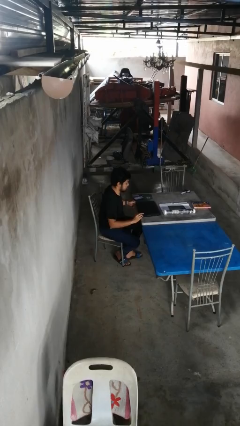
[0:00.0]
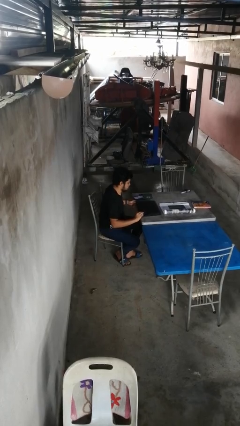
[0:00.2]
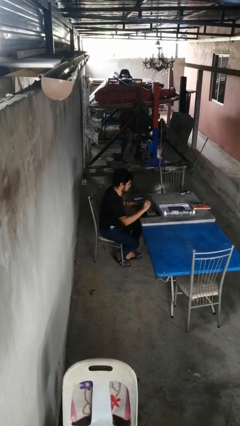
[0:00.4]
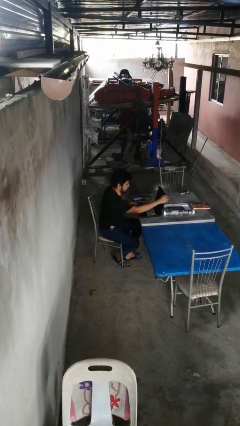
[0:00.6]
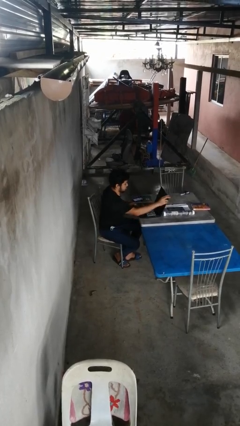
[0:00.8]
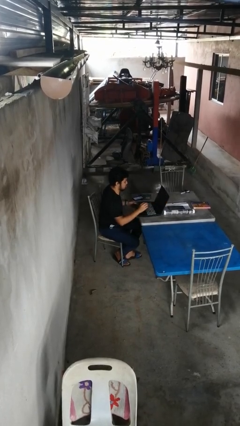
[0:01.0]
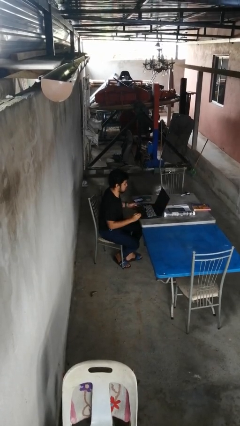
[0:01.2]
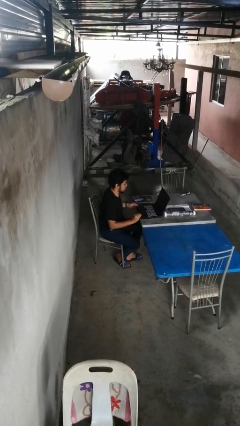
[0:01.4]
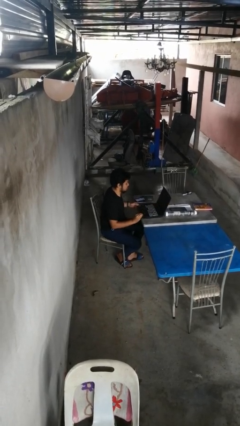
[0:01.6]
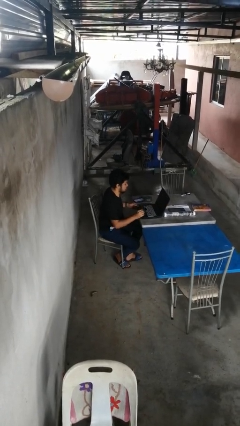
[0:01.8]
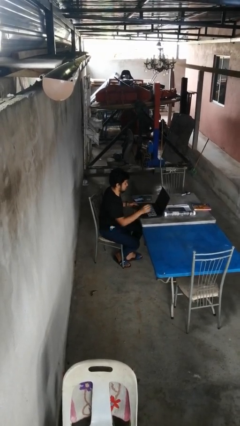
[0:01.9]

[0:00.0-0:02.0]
person opens laptop

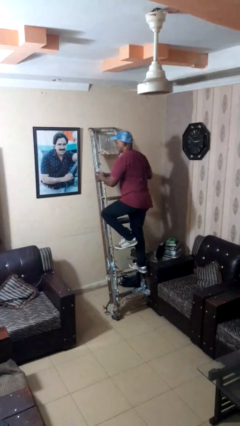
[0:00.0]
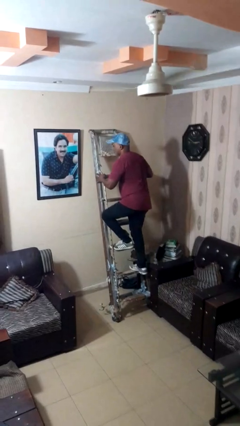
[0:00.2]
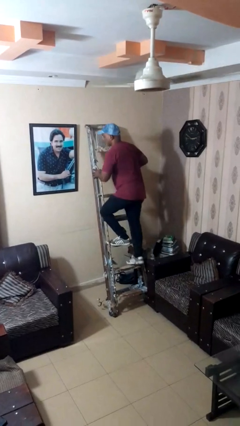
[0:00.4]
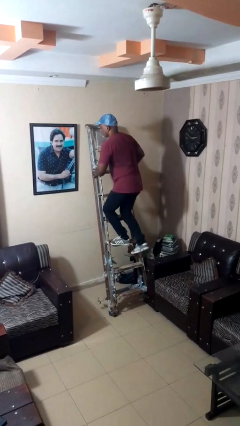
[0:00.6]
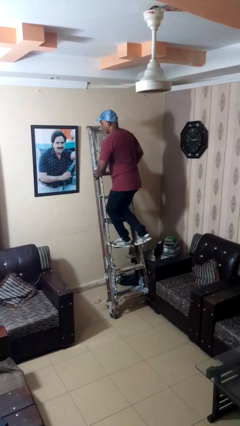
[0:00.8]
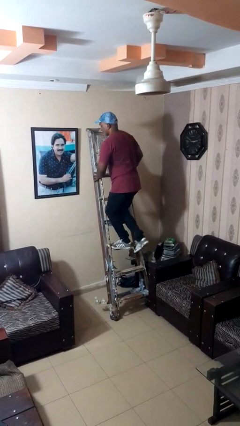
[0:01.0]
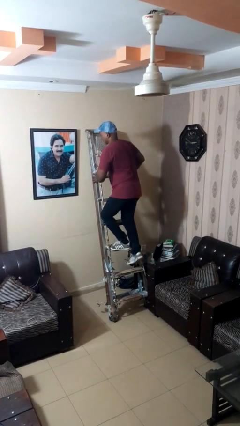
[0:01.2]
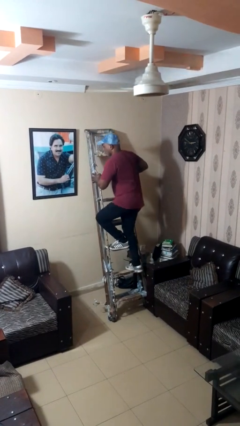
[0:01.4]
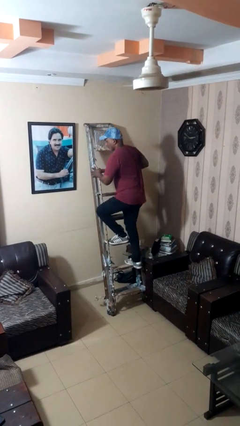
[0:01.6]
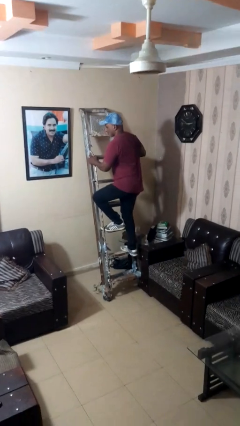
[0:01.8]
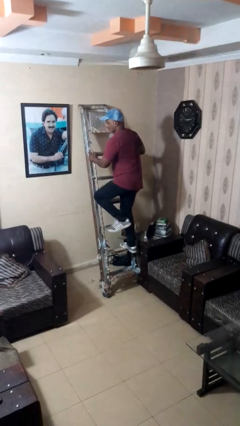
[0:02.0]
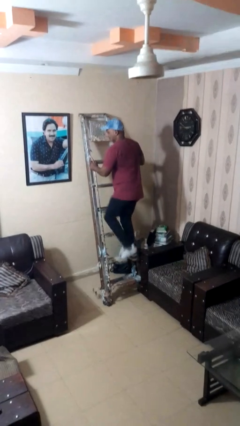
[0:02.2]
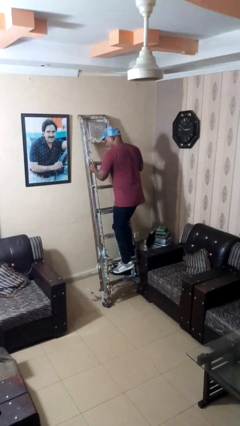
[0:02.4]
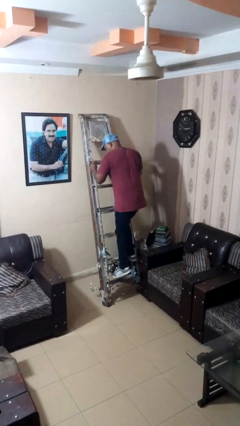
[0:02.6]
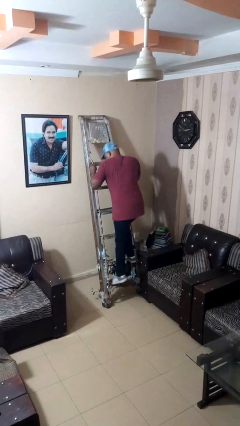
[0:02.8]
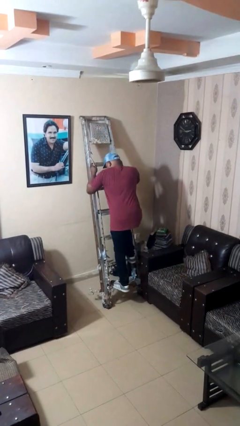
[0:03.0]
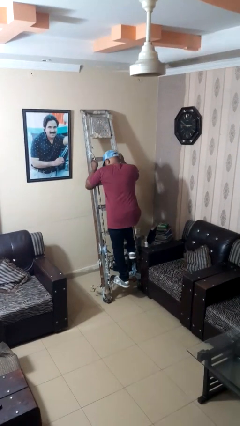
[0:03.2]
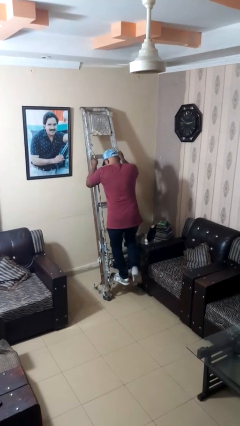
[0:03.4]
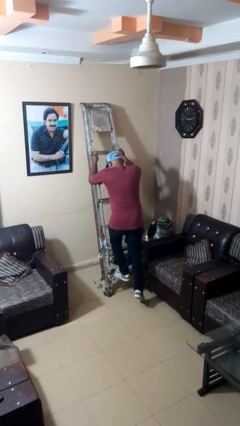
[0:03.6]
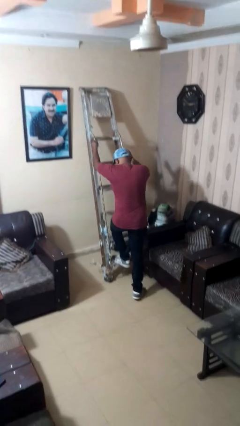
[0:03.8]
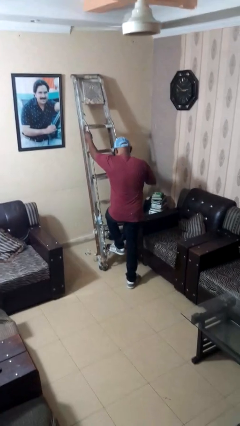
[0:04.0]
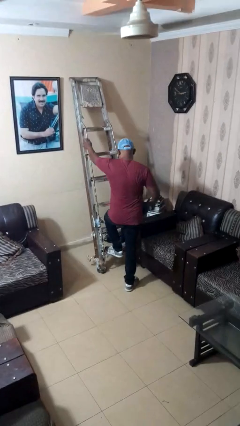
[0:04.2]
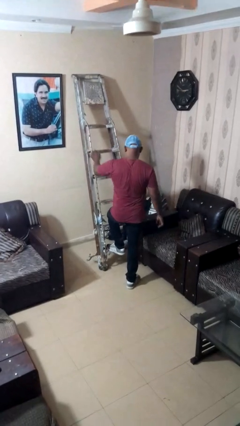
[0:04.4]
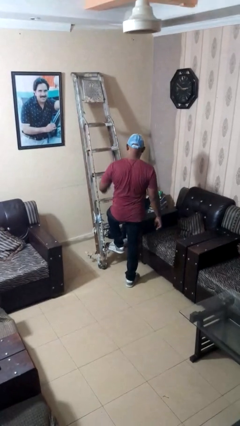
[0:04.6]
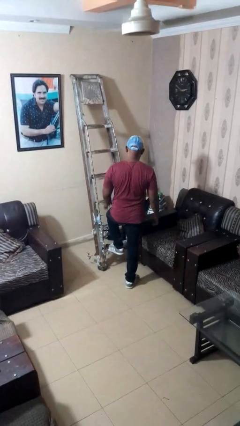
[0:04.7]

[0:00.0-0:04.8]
person climbs down ladder

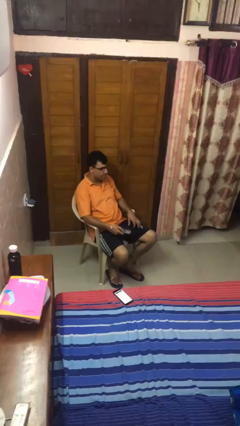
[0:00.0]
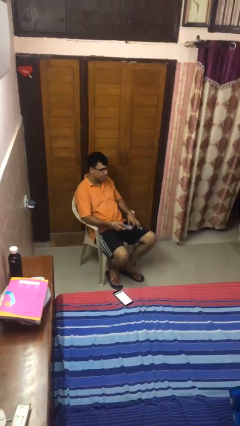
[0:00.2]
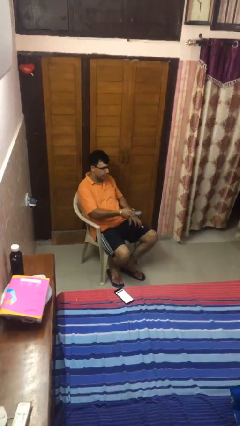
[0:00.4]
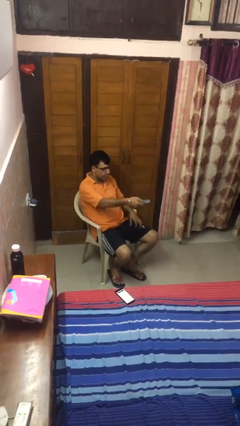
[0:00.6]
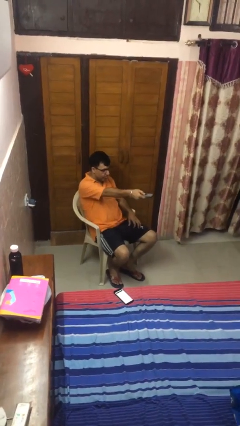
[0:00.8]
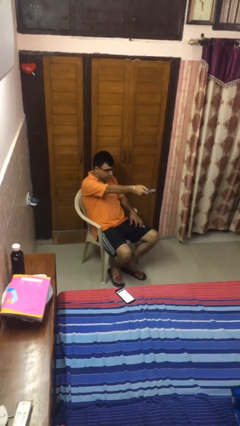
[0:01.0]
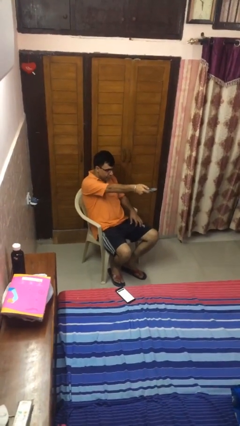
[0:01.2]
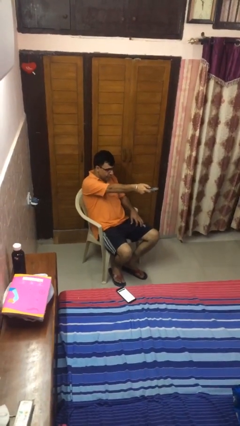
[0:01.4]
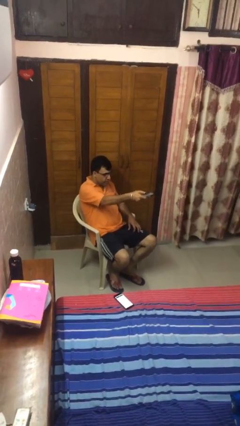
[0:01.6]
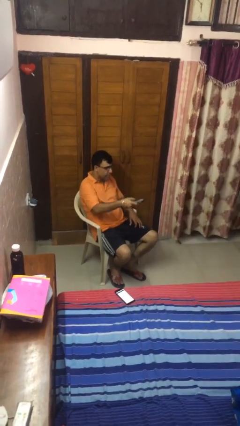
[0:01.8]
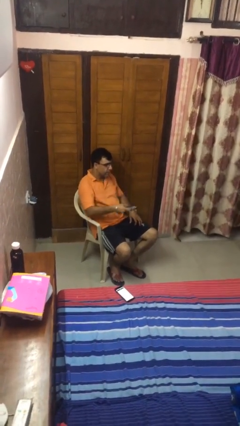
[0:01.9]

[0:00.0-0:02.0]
person uses television remote

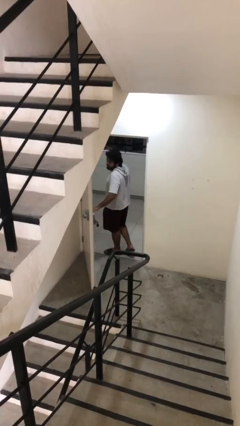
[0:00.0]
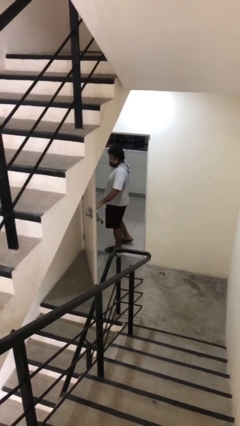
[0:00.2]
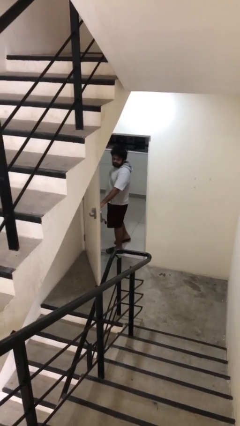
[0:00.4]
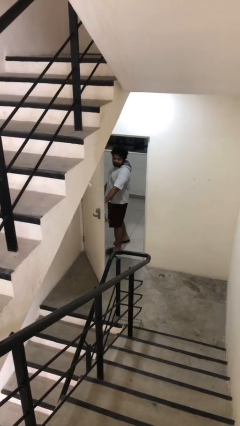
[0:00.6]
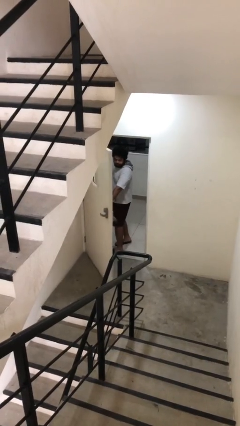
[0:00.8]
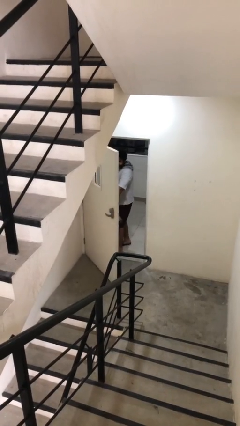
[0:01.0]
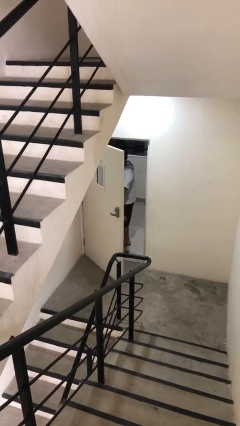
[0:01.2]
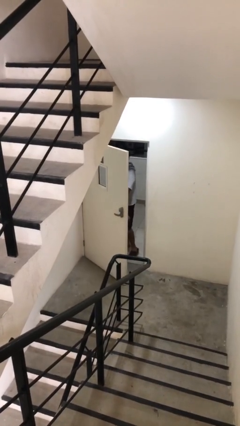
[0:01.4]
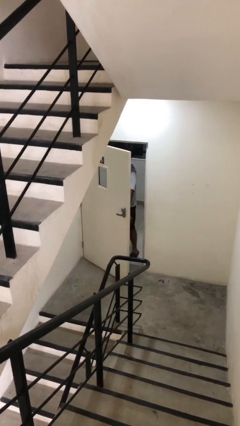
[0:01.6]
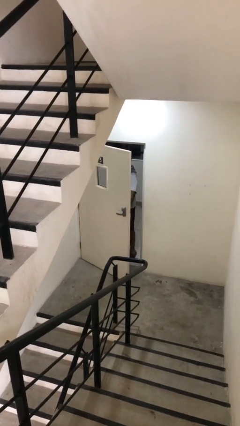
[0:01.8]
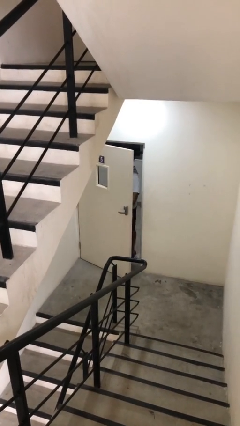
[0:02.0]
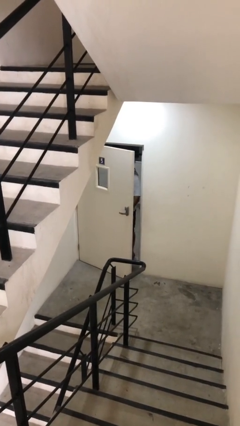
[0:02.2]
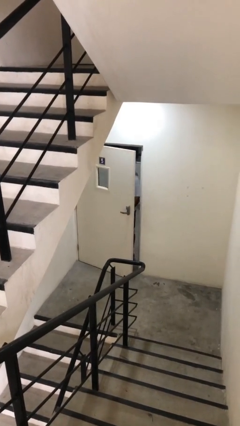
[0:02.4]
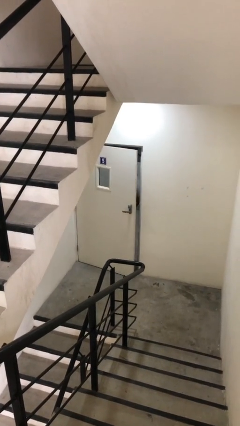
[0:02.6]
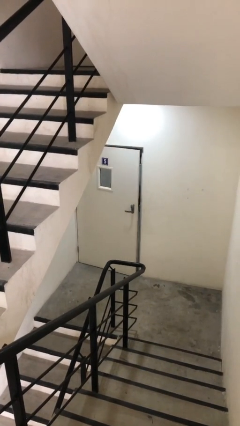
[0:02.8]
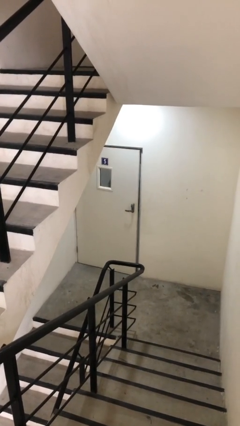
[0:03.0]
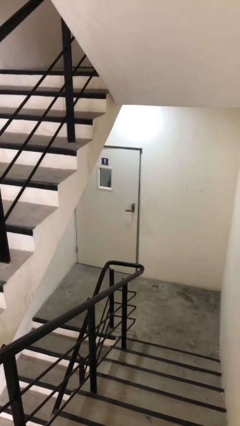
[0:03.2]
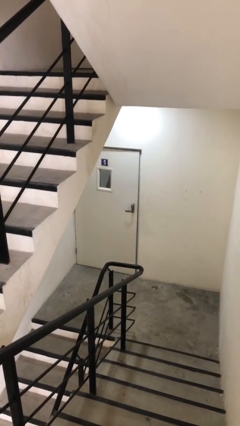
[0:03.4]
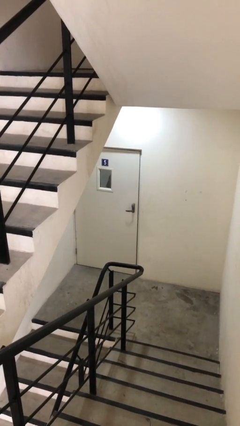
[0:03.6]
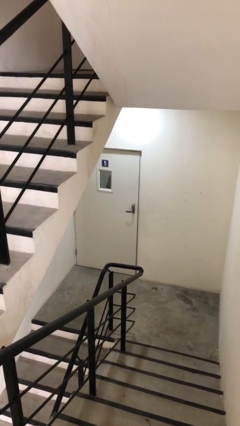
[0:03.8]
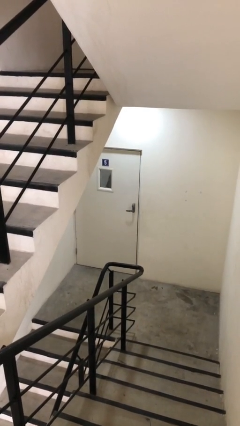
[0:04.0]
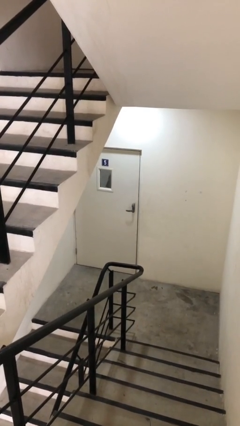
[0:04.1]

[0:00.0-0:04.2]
person closes facility door

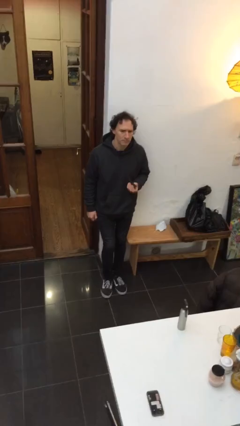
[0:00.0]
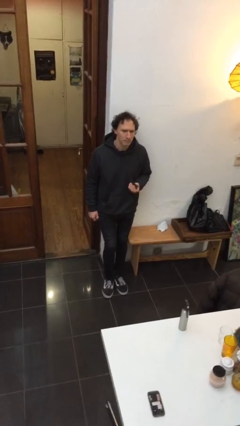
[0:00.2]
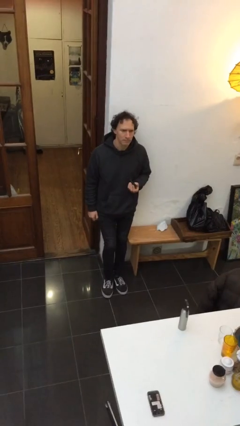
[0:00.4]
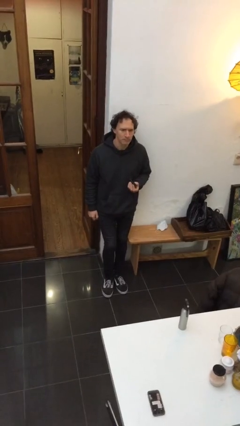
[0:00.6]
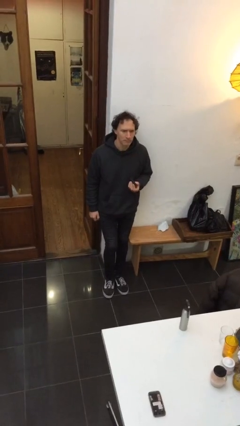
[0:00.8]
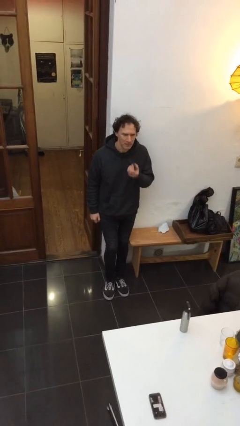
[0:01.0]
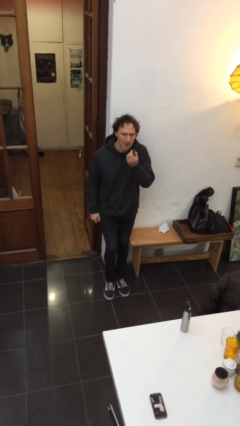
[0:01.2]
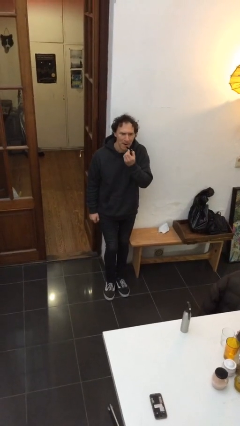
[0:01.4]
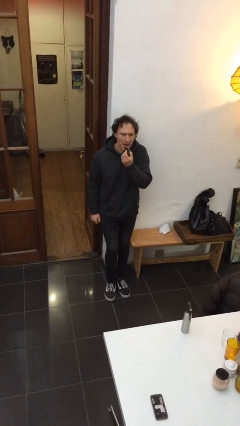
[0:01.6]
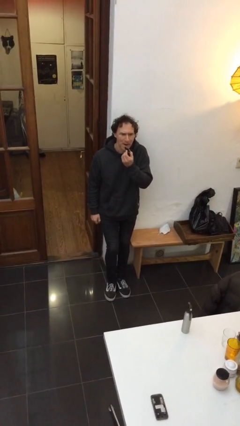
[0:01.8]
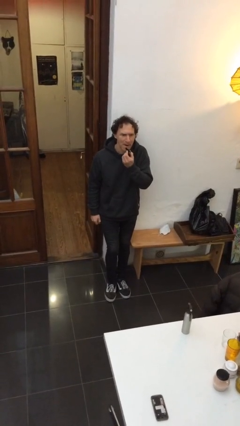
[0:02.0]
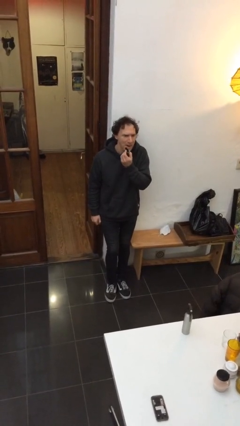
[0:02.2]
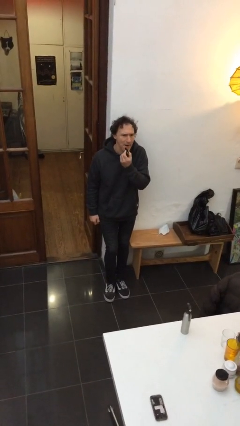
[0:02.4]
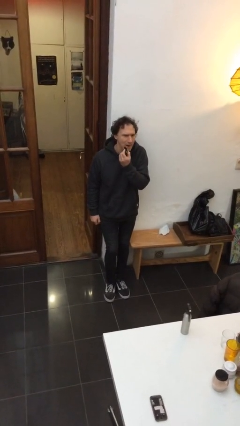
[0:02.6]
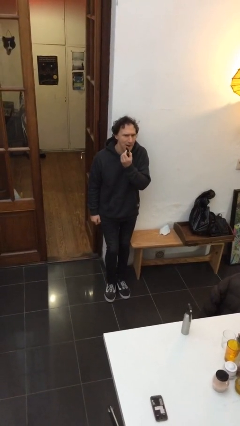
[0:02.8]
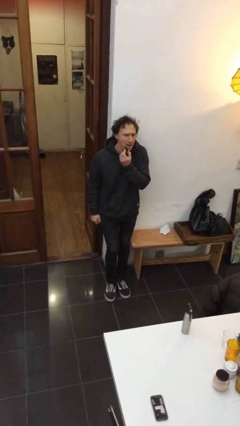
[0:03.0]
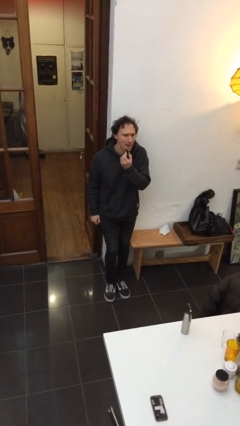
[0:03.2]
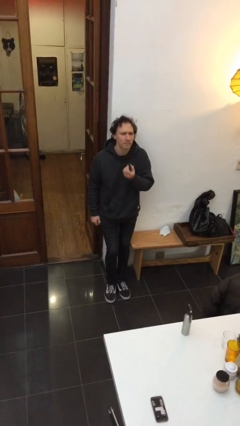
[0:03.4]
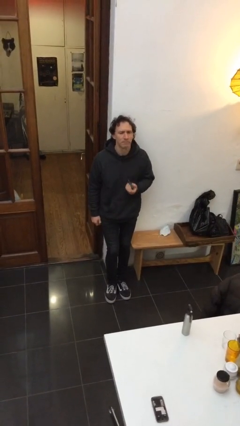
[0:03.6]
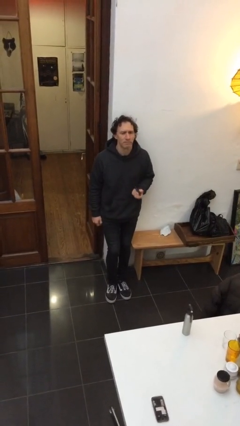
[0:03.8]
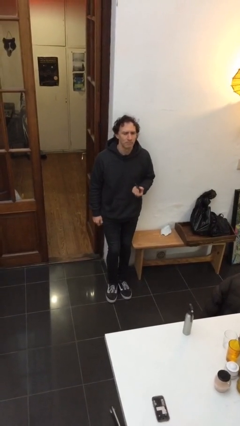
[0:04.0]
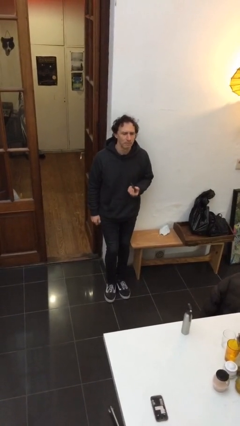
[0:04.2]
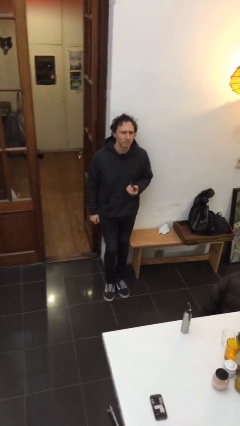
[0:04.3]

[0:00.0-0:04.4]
person applies lip makeup
